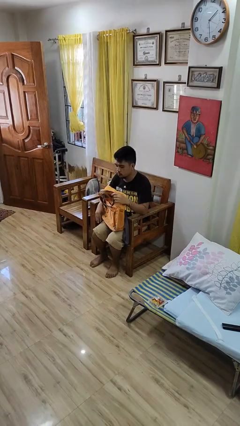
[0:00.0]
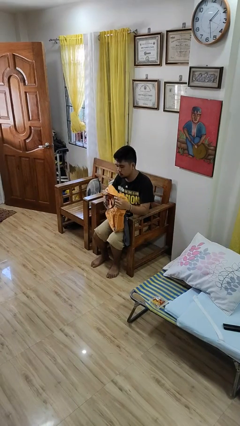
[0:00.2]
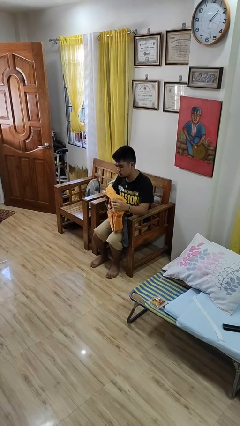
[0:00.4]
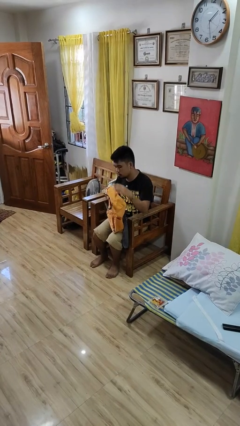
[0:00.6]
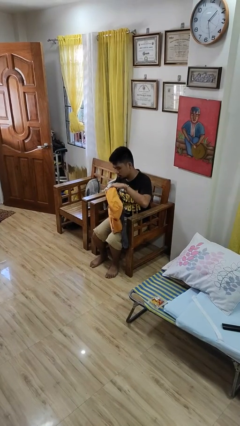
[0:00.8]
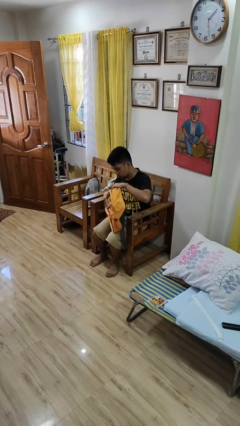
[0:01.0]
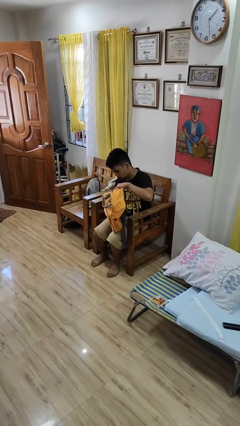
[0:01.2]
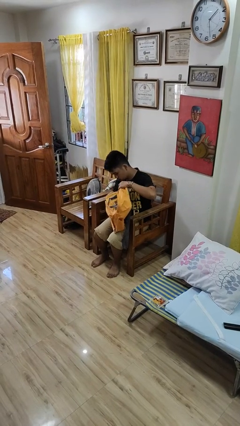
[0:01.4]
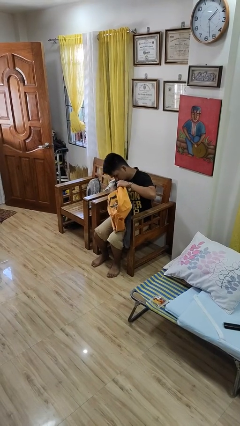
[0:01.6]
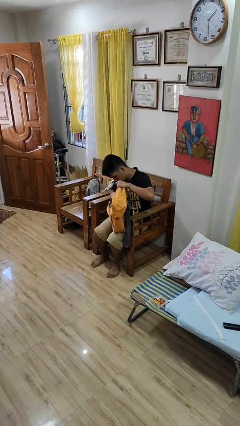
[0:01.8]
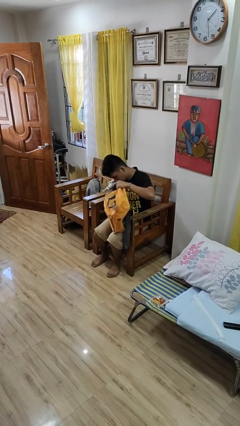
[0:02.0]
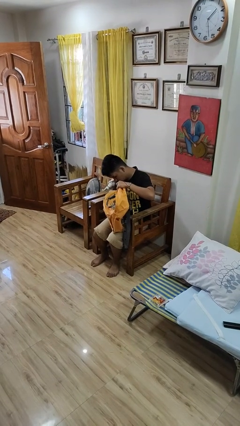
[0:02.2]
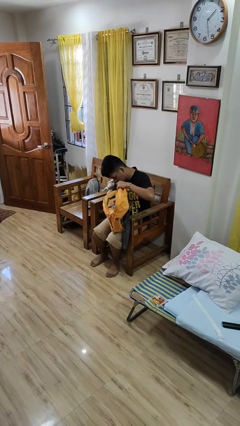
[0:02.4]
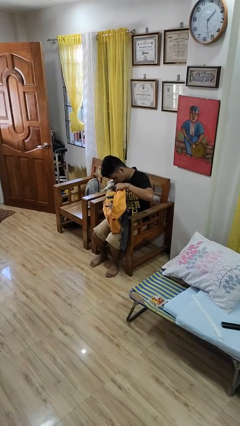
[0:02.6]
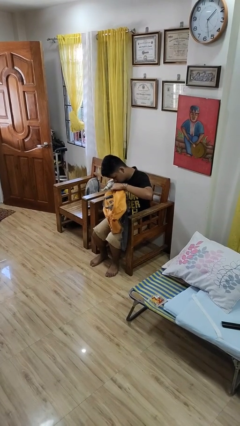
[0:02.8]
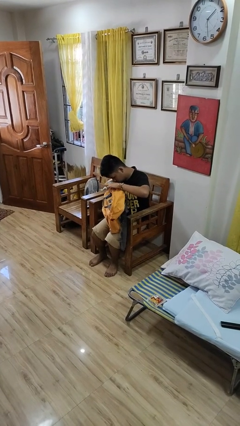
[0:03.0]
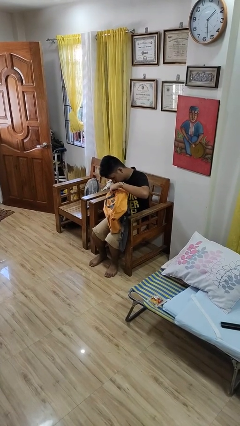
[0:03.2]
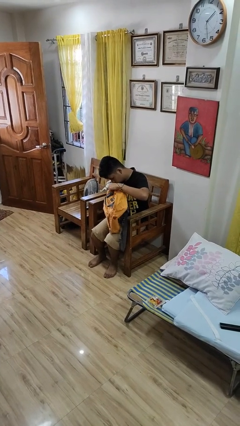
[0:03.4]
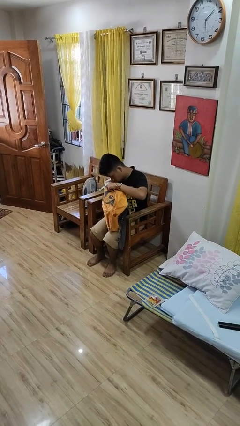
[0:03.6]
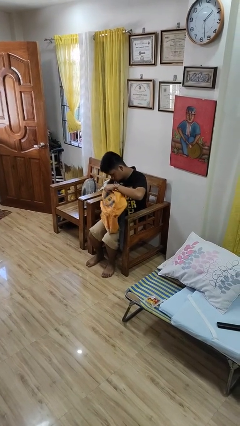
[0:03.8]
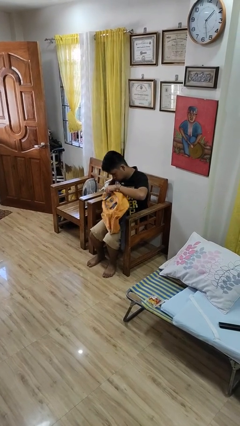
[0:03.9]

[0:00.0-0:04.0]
person searches in backpack

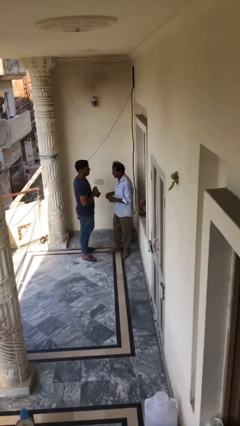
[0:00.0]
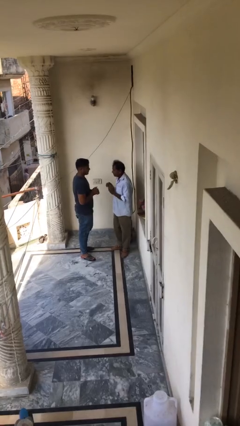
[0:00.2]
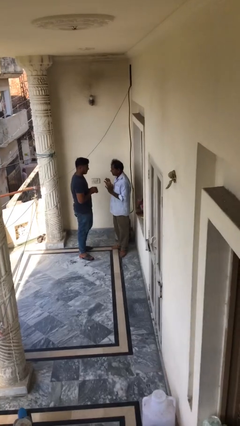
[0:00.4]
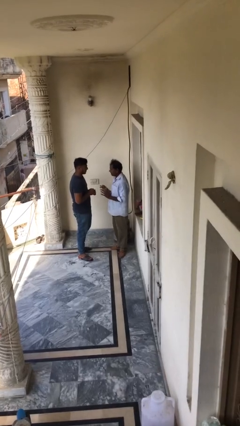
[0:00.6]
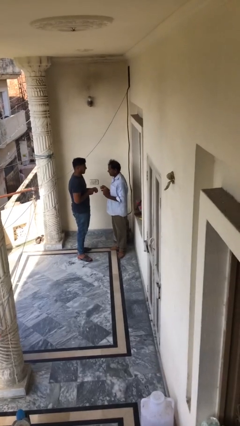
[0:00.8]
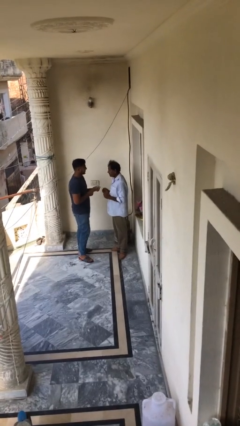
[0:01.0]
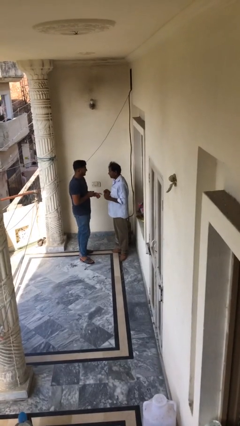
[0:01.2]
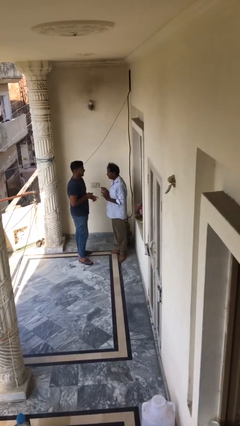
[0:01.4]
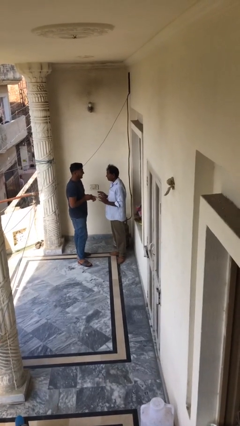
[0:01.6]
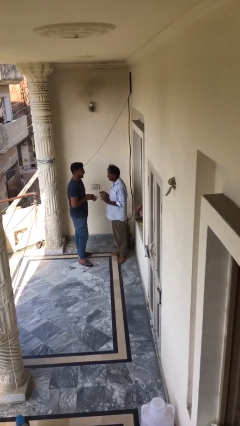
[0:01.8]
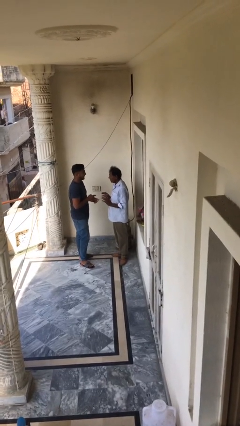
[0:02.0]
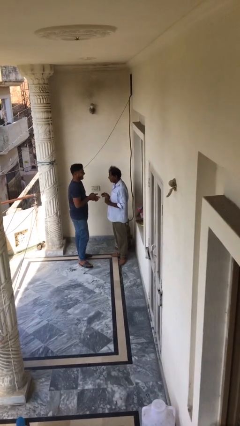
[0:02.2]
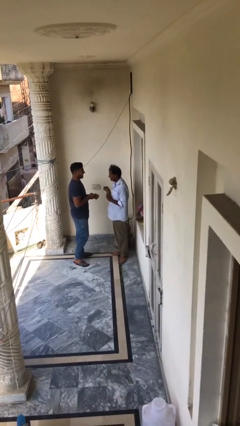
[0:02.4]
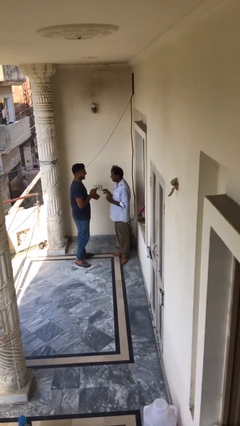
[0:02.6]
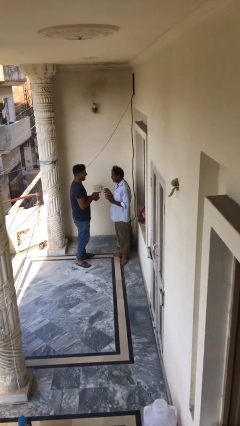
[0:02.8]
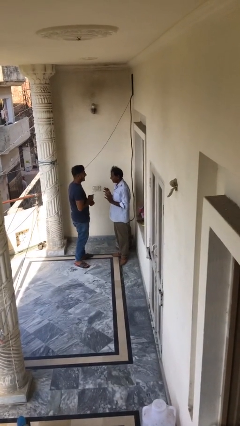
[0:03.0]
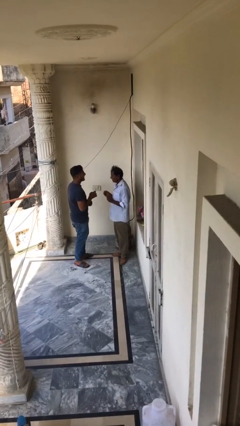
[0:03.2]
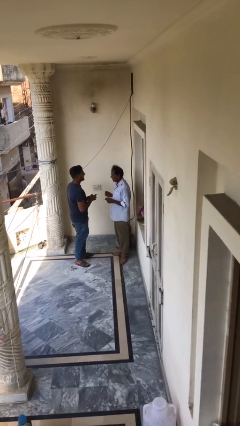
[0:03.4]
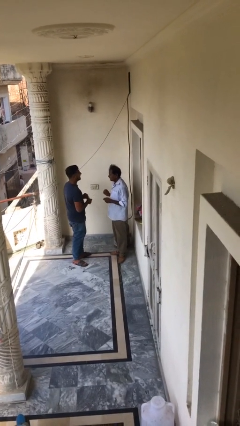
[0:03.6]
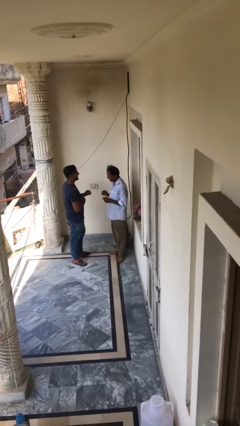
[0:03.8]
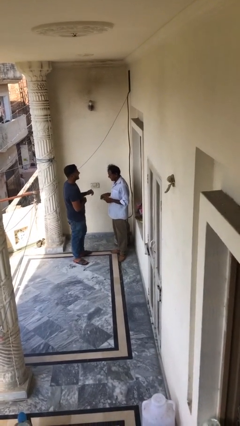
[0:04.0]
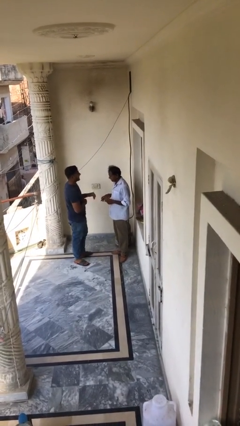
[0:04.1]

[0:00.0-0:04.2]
person talks to person

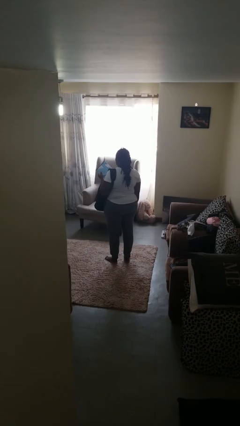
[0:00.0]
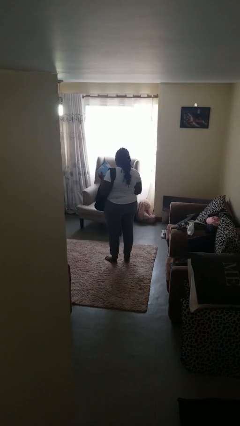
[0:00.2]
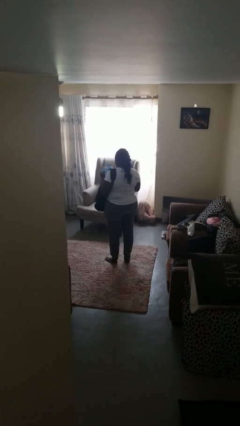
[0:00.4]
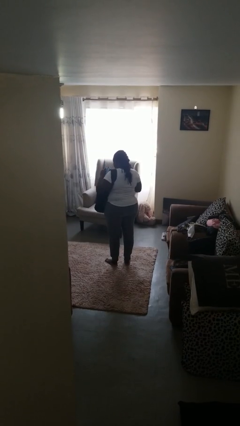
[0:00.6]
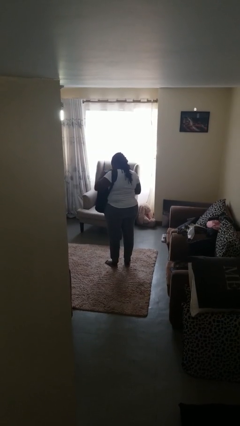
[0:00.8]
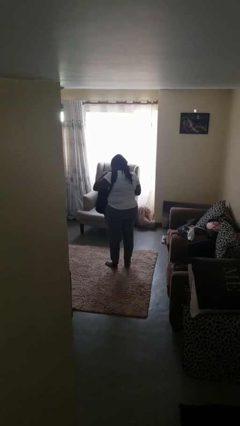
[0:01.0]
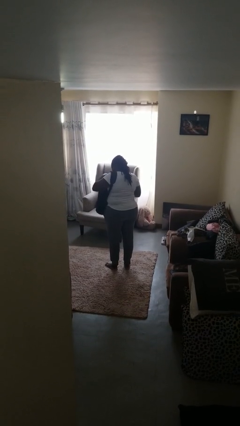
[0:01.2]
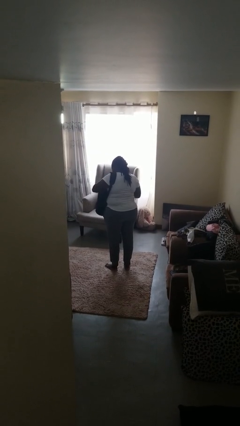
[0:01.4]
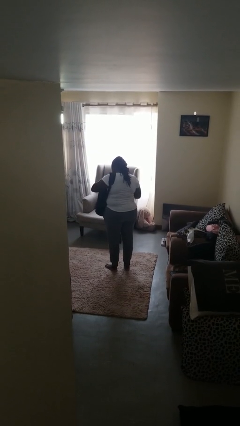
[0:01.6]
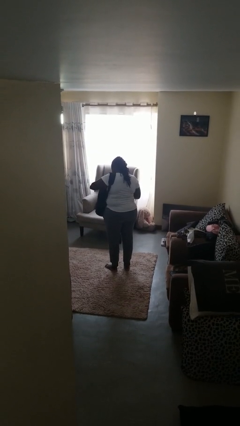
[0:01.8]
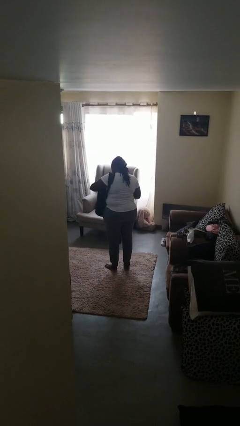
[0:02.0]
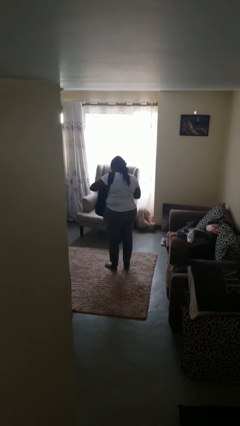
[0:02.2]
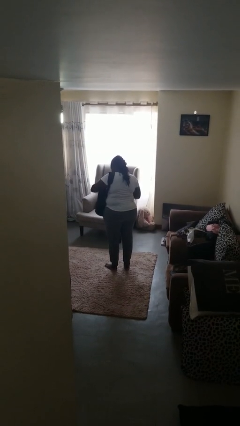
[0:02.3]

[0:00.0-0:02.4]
person puts object into backpack

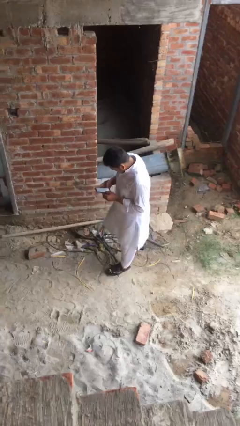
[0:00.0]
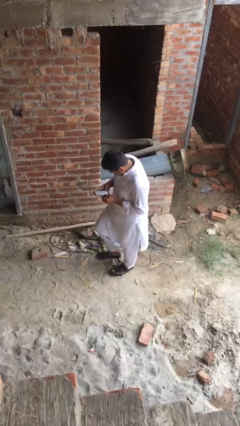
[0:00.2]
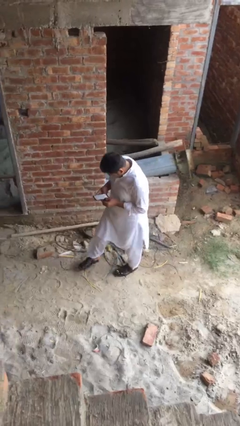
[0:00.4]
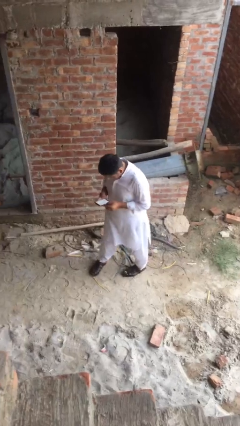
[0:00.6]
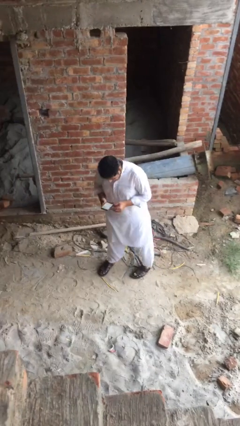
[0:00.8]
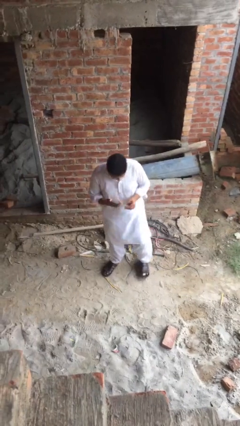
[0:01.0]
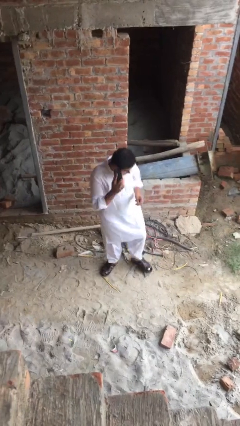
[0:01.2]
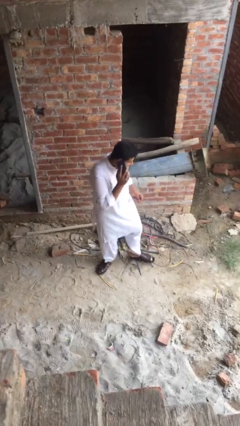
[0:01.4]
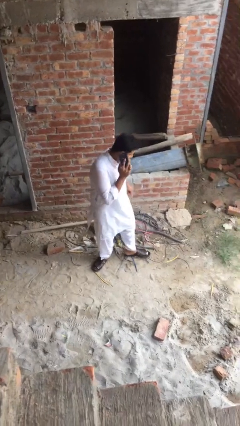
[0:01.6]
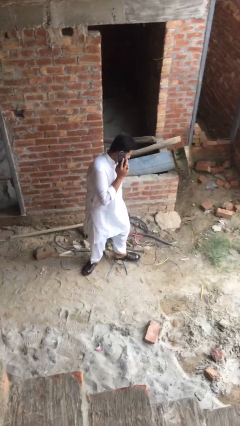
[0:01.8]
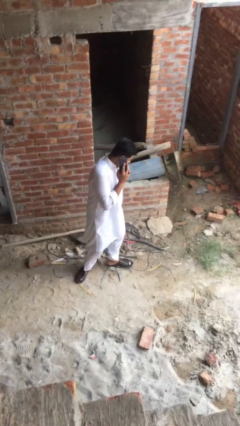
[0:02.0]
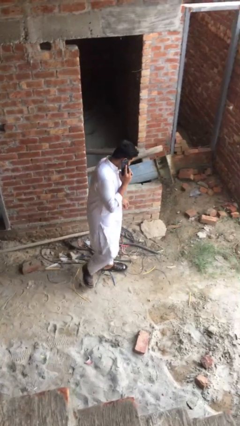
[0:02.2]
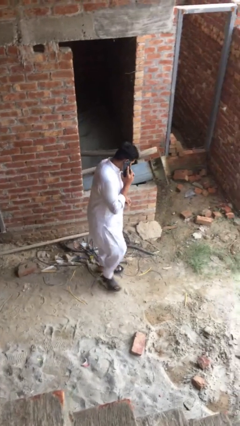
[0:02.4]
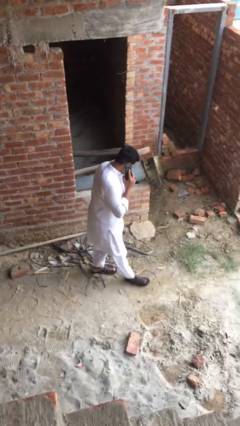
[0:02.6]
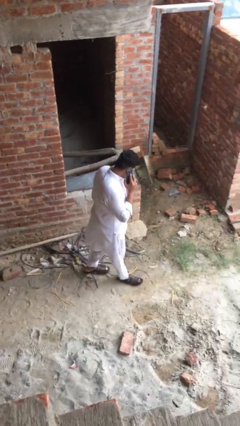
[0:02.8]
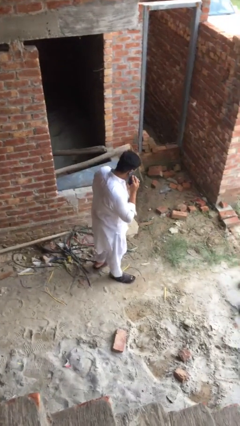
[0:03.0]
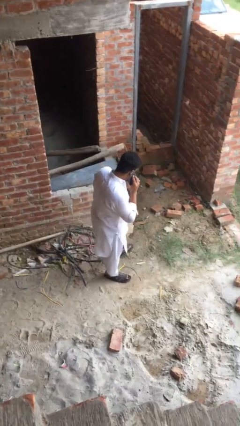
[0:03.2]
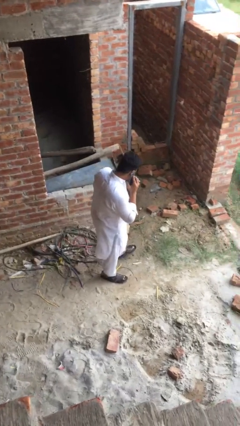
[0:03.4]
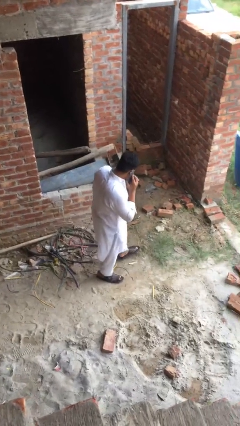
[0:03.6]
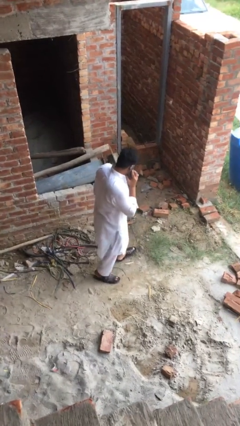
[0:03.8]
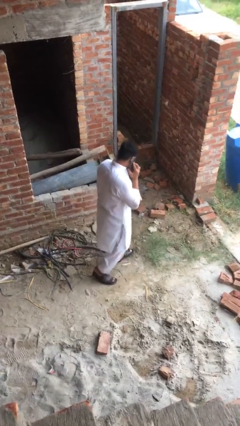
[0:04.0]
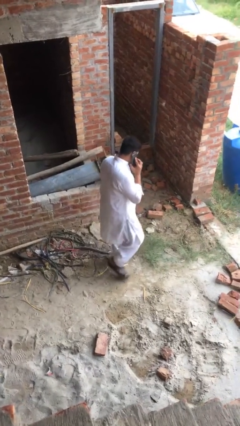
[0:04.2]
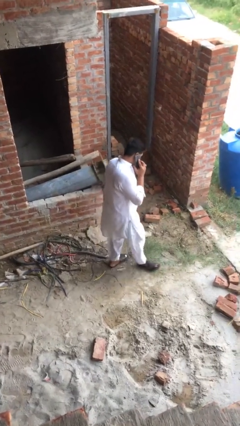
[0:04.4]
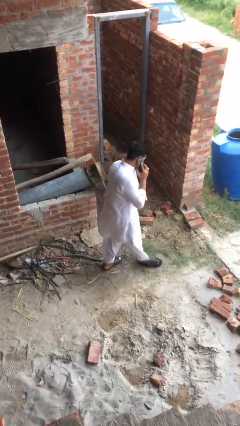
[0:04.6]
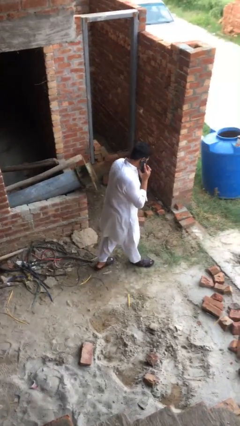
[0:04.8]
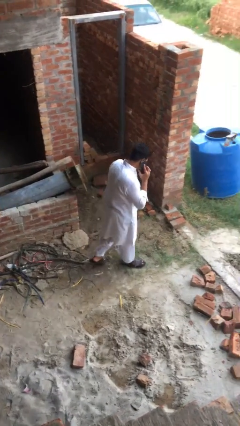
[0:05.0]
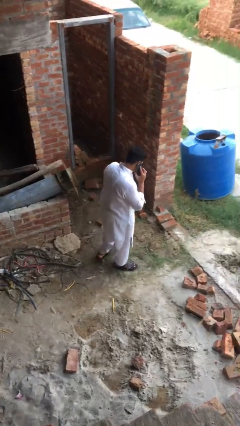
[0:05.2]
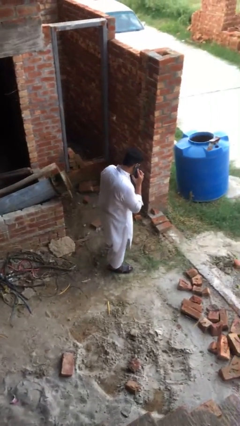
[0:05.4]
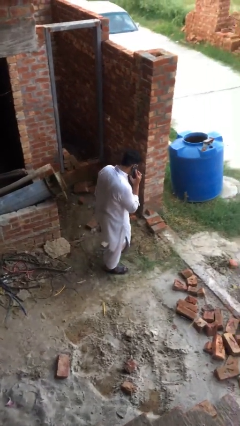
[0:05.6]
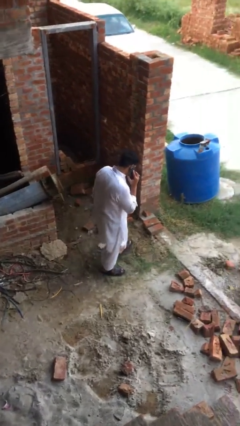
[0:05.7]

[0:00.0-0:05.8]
person talks on phone

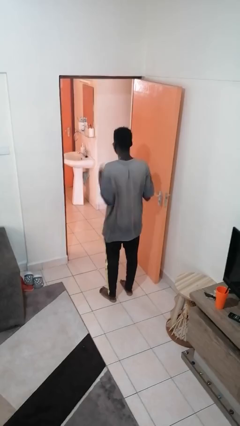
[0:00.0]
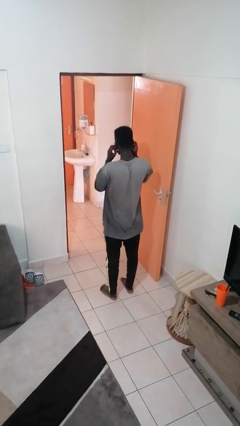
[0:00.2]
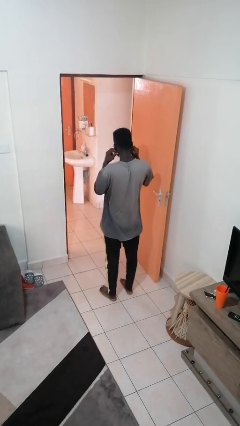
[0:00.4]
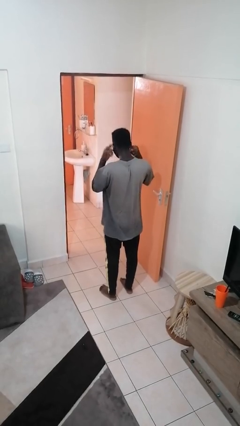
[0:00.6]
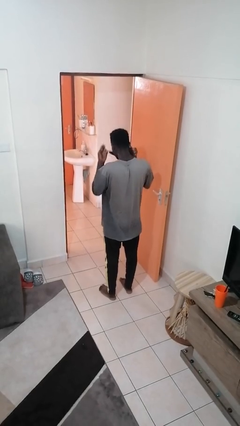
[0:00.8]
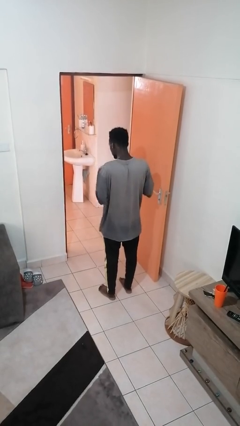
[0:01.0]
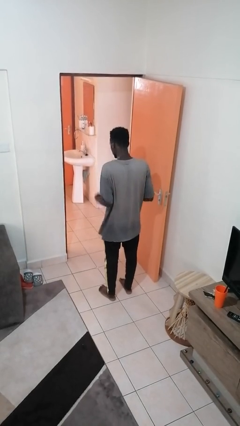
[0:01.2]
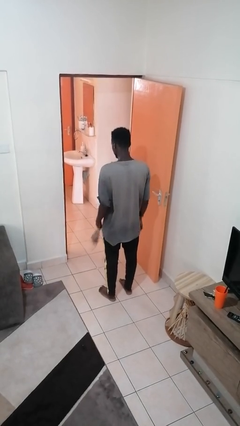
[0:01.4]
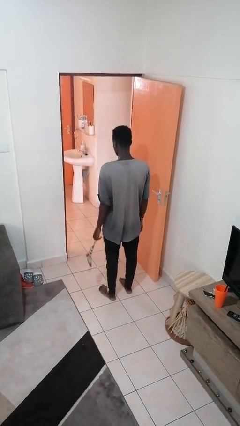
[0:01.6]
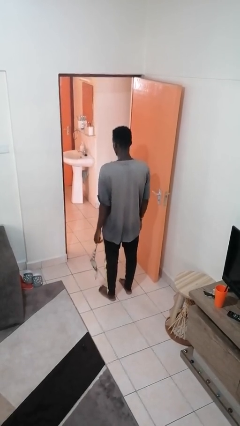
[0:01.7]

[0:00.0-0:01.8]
person takes off facemask
